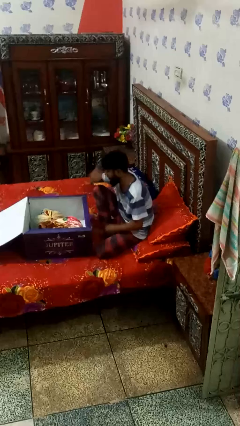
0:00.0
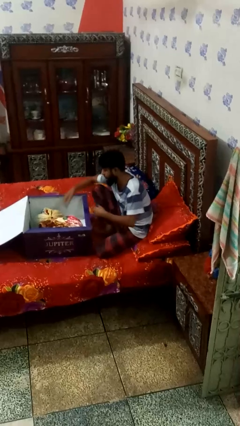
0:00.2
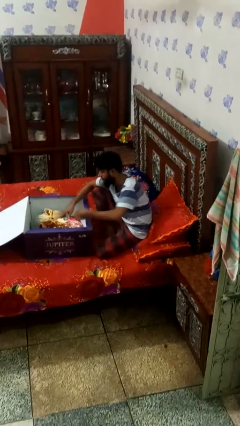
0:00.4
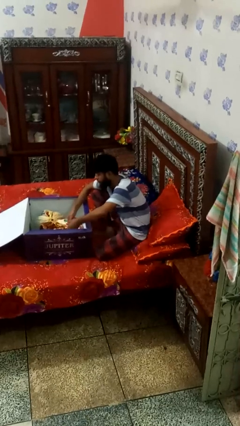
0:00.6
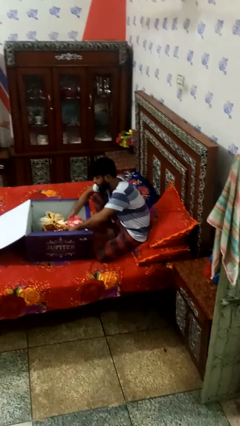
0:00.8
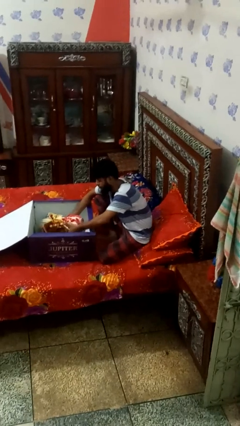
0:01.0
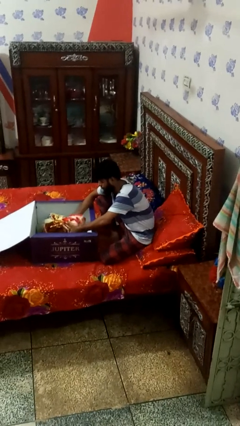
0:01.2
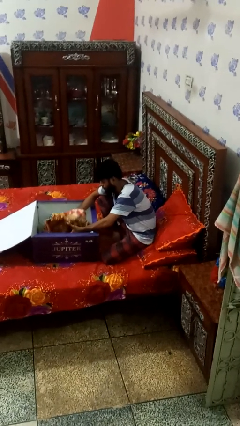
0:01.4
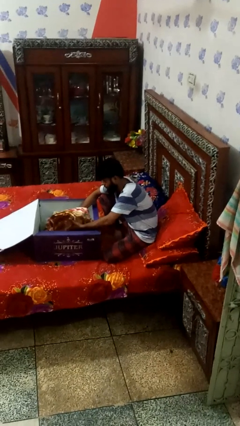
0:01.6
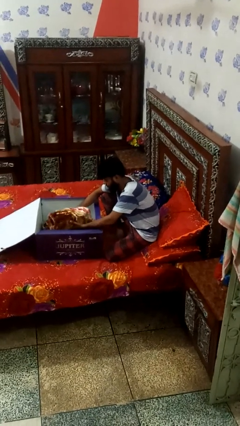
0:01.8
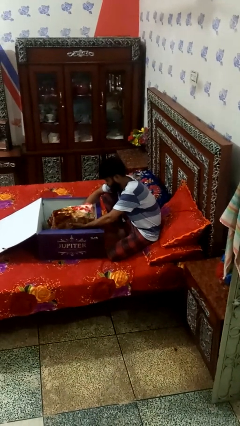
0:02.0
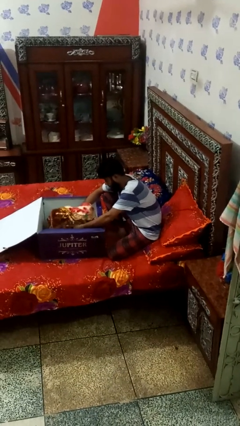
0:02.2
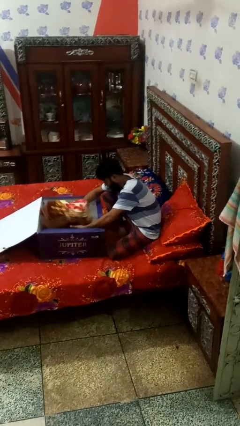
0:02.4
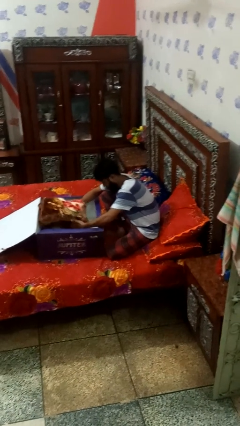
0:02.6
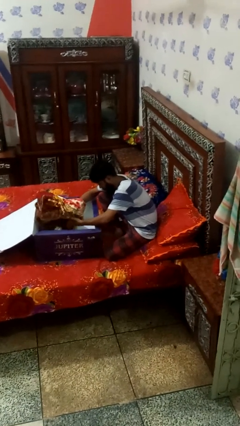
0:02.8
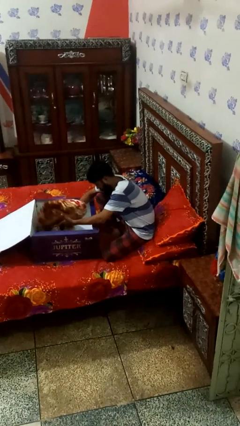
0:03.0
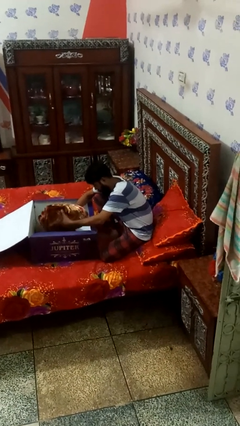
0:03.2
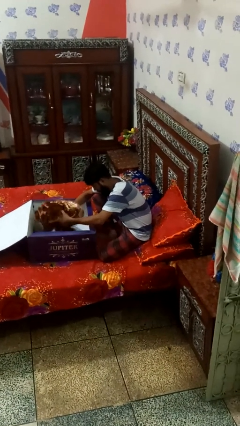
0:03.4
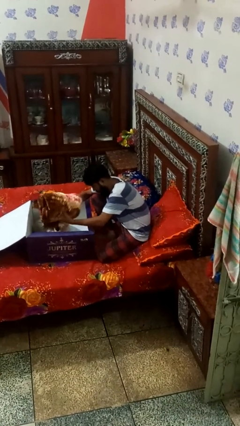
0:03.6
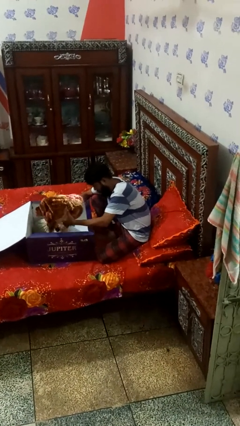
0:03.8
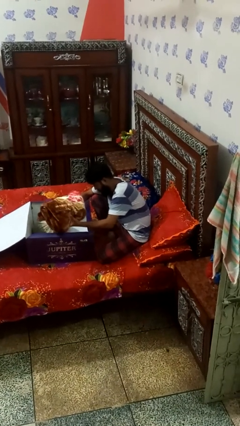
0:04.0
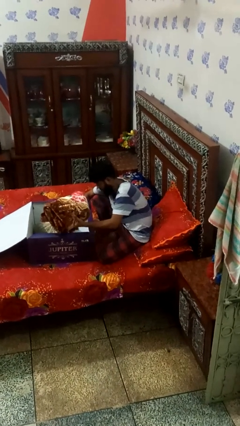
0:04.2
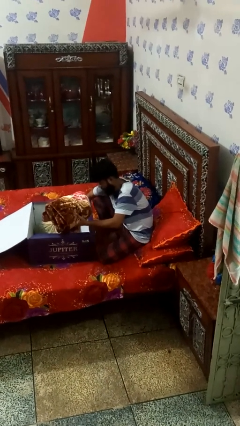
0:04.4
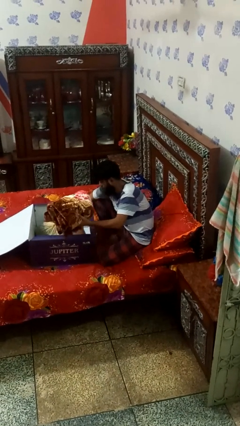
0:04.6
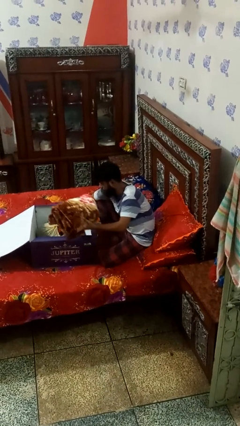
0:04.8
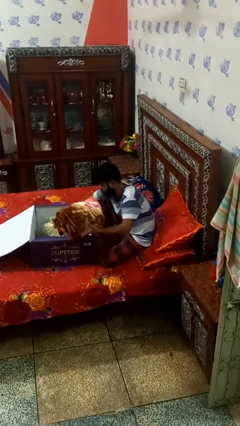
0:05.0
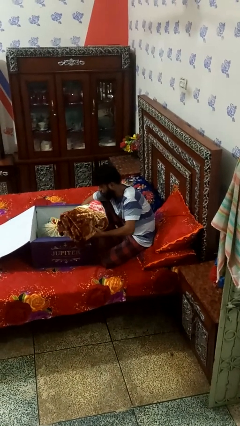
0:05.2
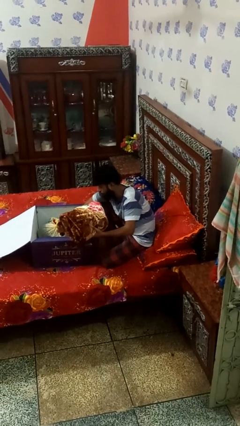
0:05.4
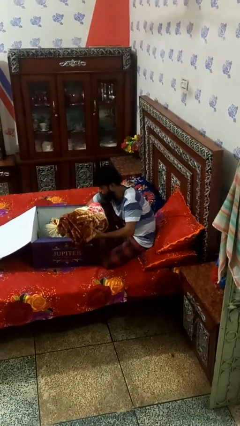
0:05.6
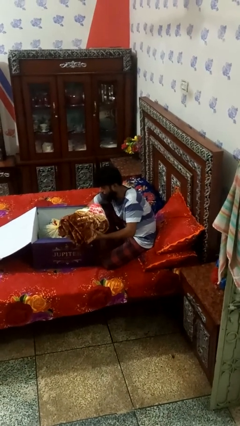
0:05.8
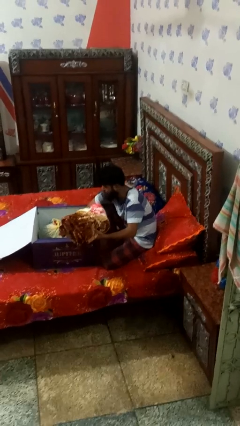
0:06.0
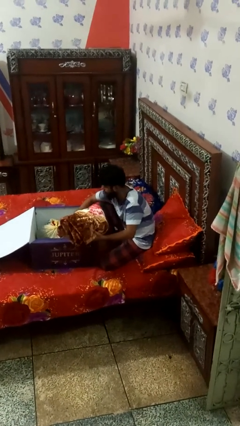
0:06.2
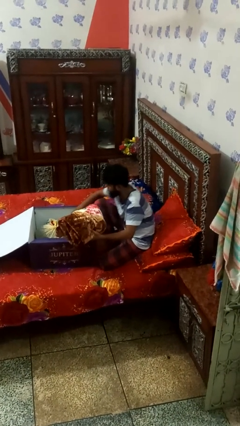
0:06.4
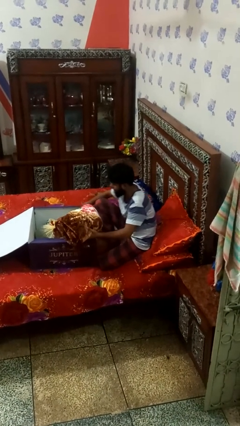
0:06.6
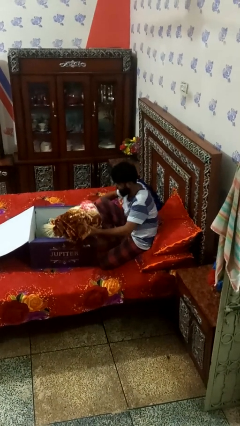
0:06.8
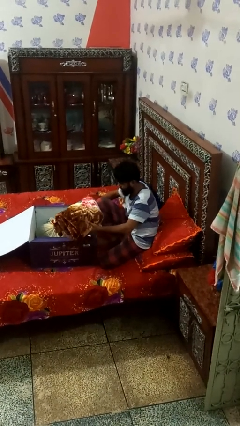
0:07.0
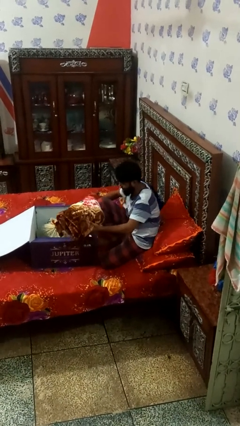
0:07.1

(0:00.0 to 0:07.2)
person takes object from box

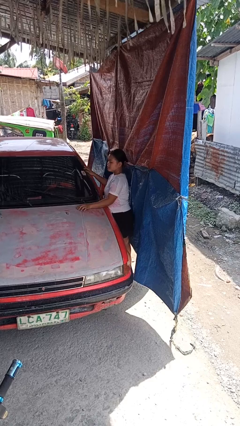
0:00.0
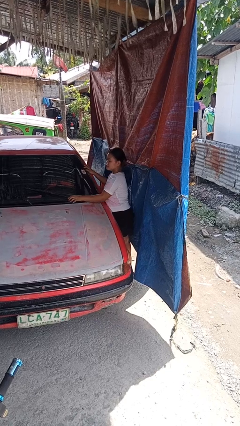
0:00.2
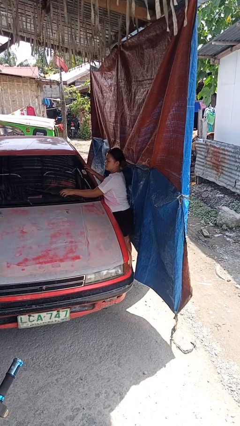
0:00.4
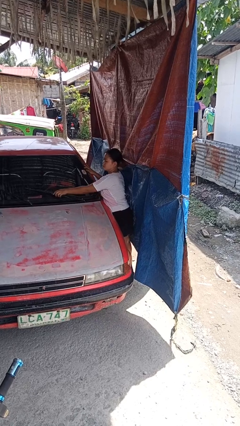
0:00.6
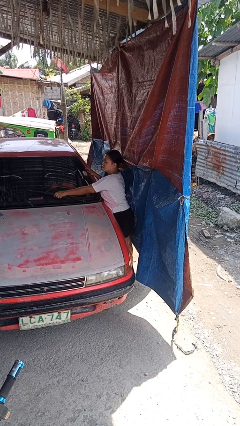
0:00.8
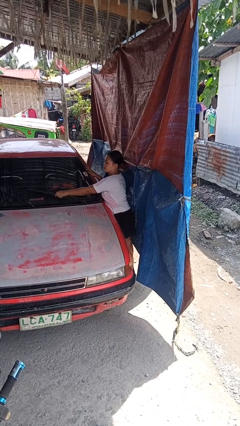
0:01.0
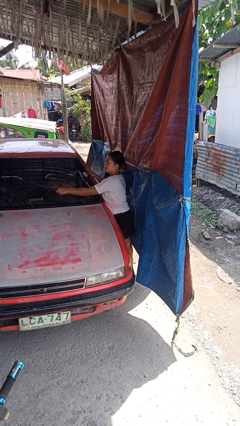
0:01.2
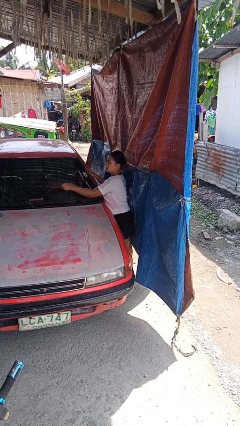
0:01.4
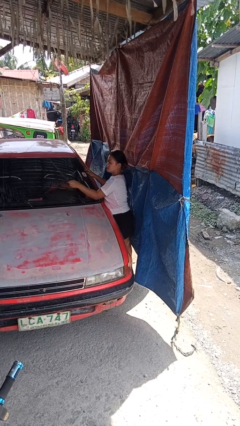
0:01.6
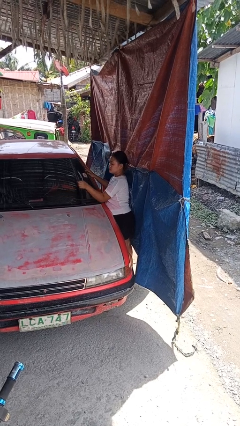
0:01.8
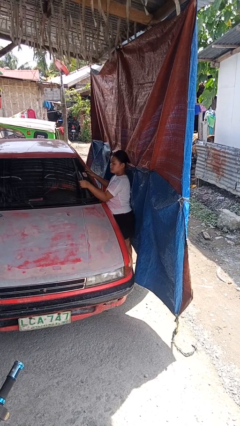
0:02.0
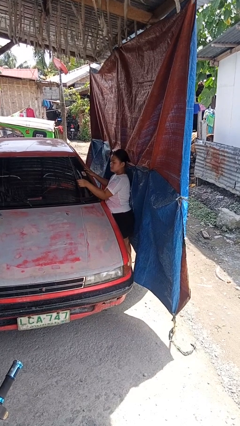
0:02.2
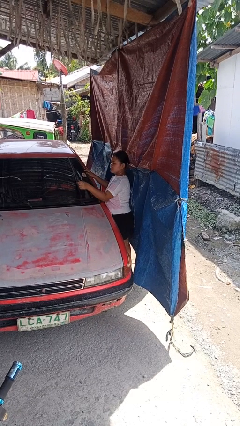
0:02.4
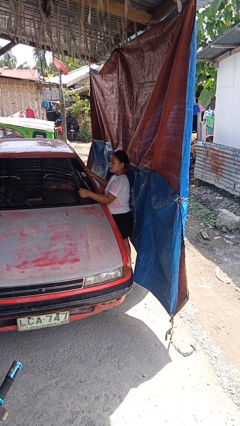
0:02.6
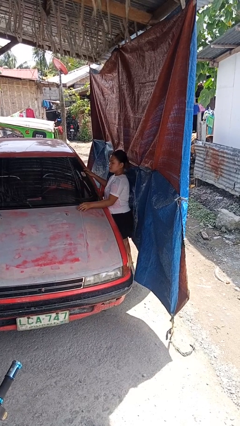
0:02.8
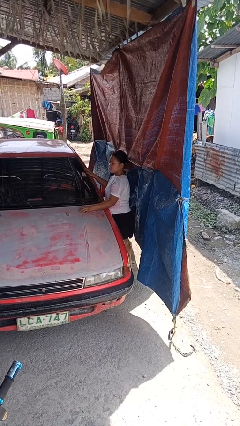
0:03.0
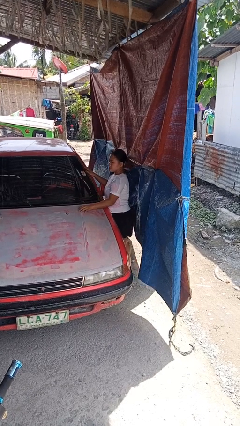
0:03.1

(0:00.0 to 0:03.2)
person flips up car wipers

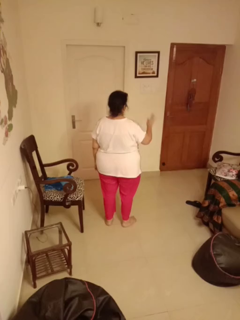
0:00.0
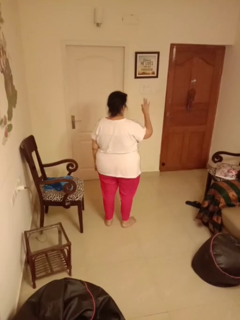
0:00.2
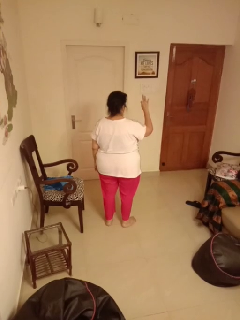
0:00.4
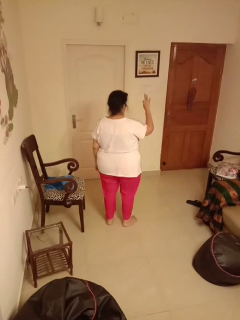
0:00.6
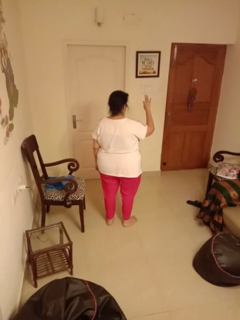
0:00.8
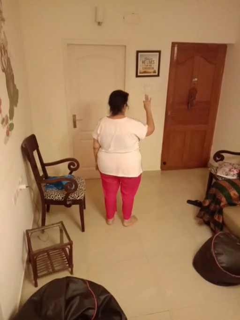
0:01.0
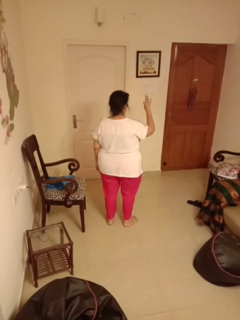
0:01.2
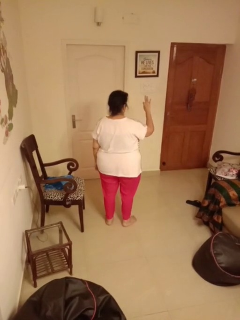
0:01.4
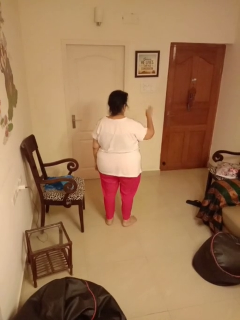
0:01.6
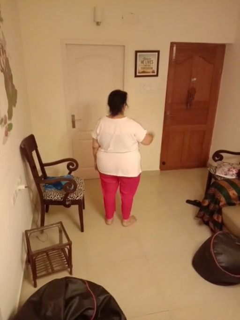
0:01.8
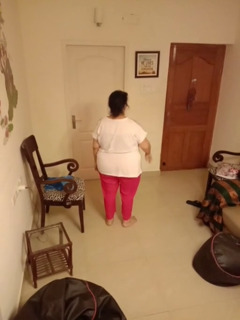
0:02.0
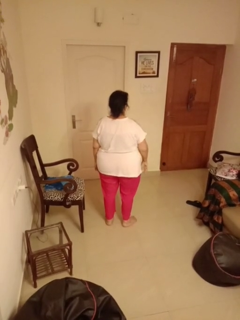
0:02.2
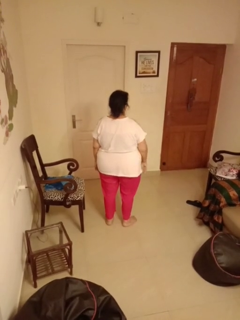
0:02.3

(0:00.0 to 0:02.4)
person gestures number three

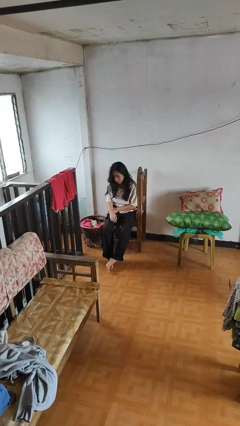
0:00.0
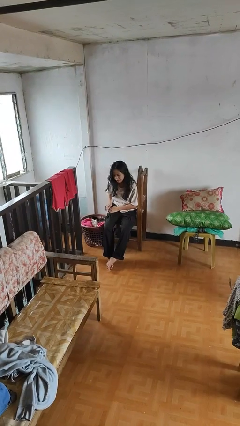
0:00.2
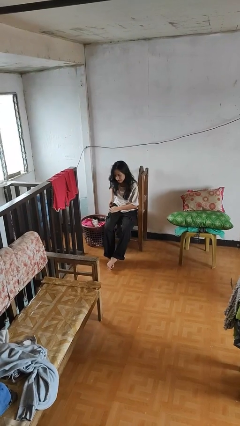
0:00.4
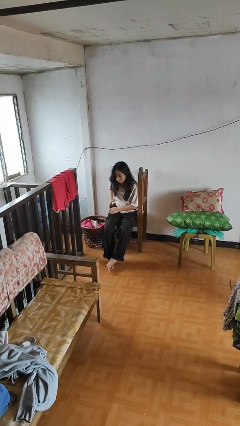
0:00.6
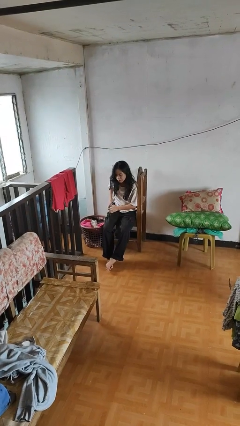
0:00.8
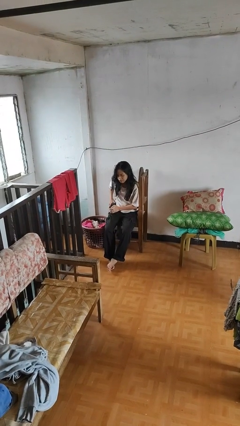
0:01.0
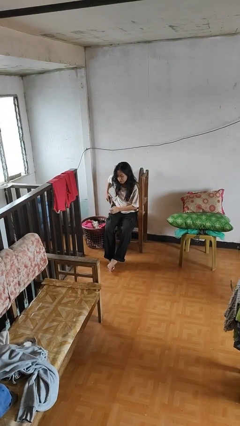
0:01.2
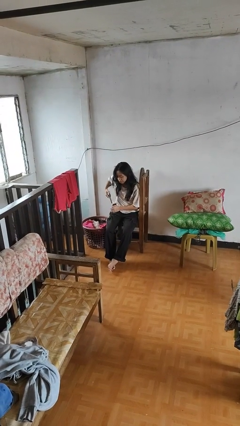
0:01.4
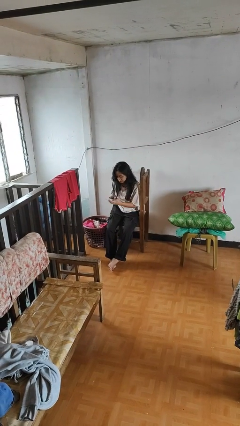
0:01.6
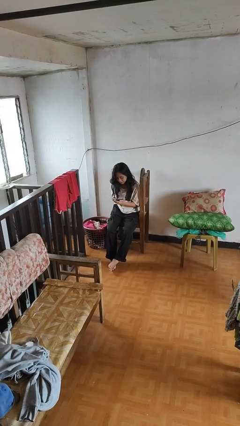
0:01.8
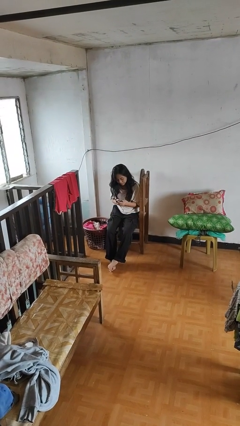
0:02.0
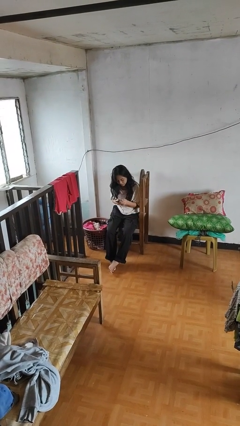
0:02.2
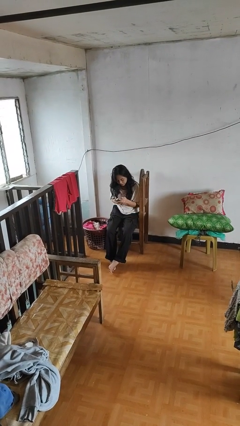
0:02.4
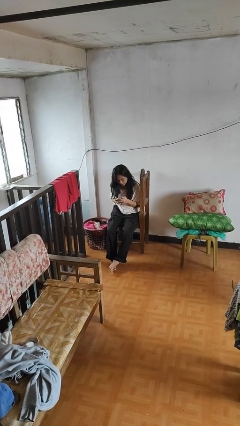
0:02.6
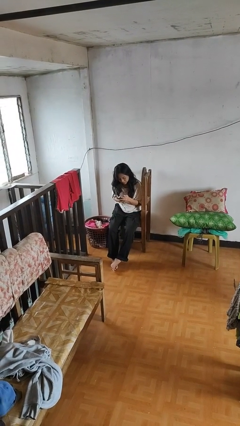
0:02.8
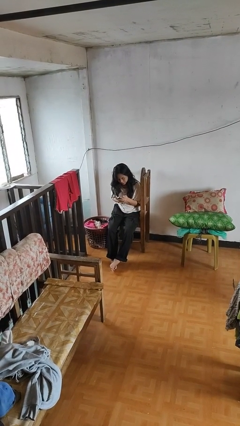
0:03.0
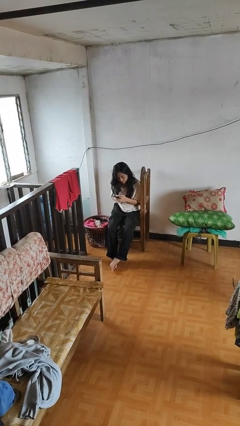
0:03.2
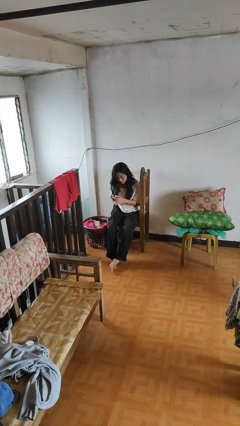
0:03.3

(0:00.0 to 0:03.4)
person takes phone from pocket

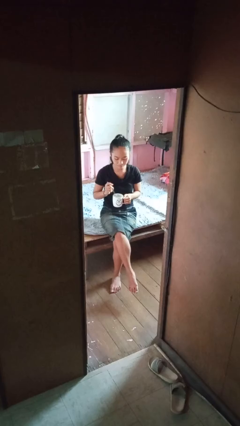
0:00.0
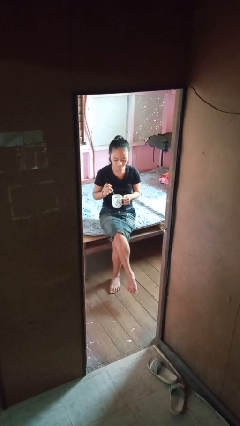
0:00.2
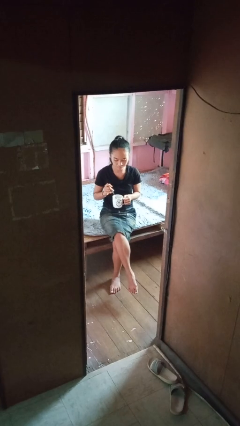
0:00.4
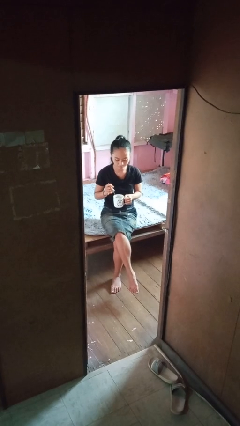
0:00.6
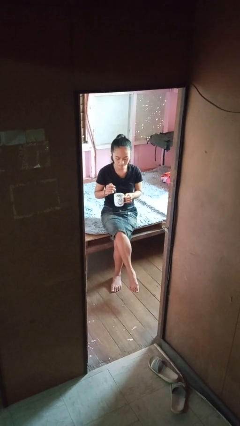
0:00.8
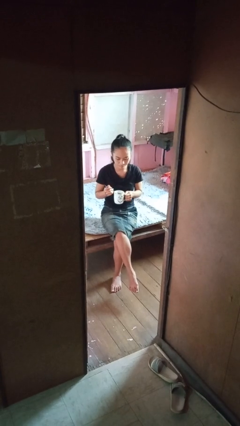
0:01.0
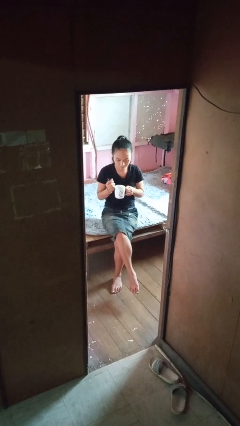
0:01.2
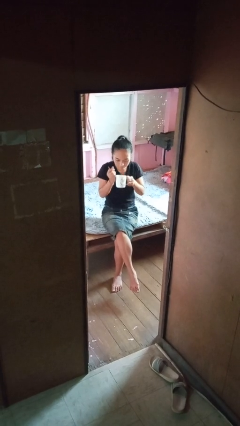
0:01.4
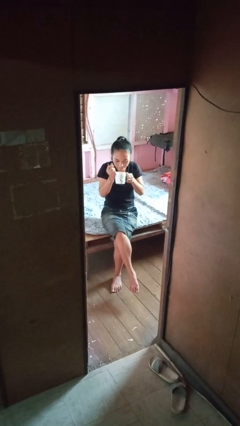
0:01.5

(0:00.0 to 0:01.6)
person stirs mug
